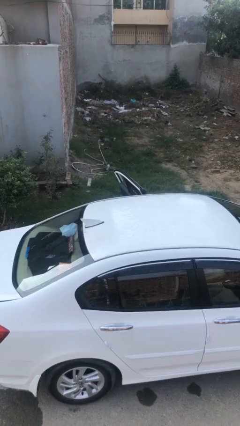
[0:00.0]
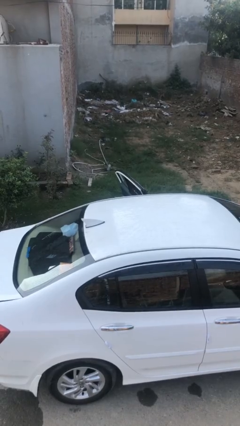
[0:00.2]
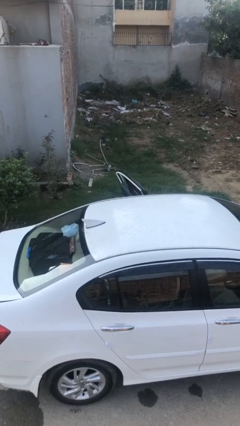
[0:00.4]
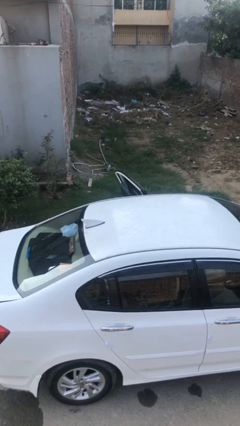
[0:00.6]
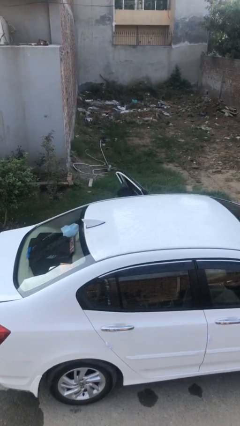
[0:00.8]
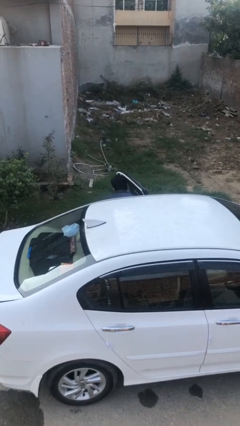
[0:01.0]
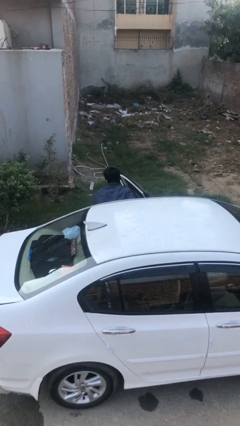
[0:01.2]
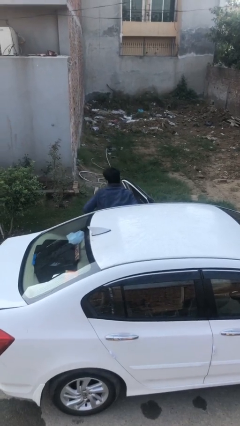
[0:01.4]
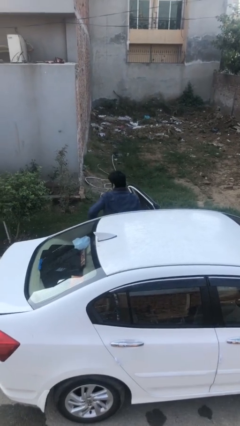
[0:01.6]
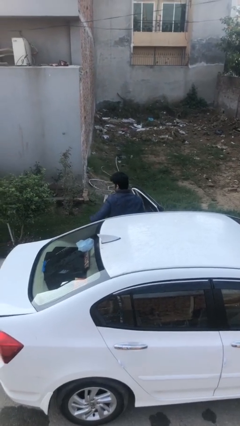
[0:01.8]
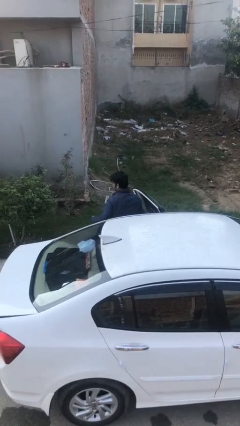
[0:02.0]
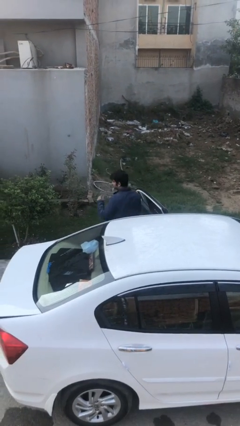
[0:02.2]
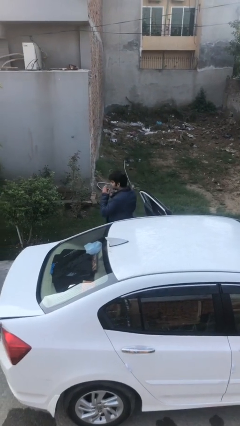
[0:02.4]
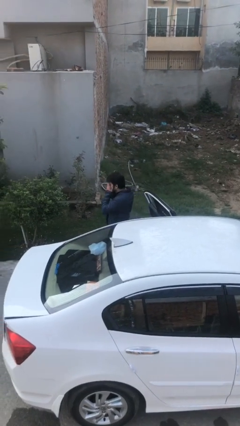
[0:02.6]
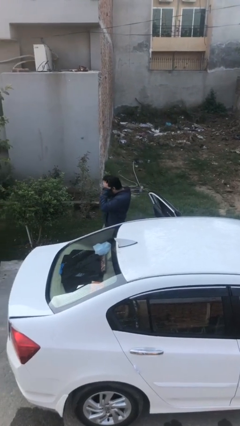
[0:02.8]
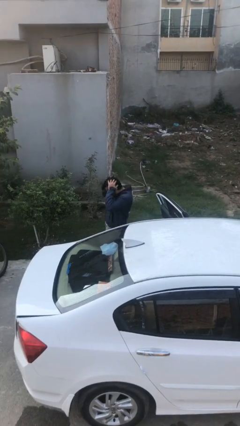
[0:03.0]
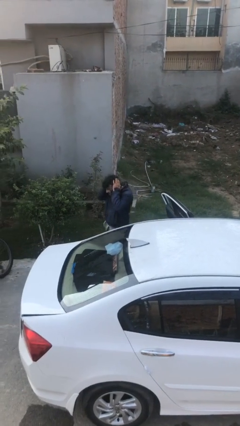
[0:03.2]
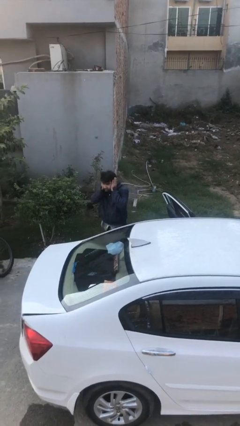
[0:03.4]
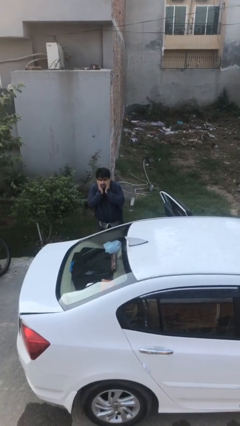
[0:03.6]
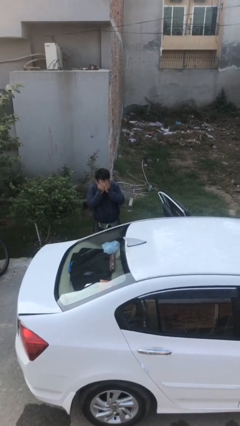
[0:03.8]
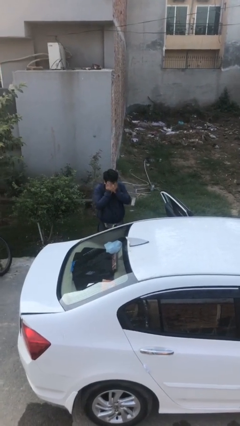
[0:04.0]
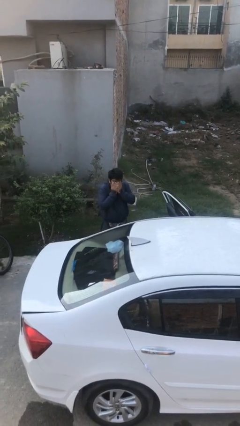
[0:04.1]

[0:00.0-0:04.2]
person exits car

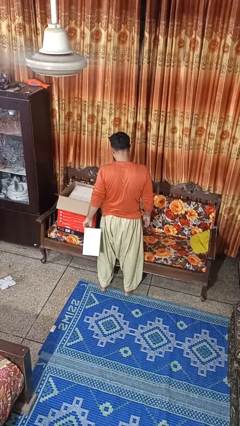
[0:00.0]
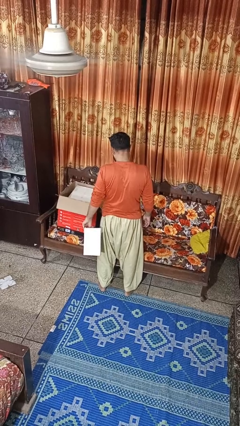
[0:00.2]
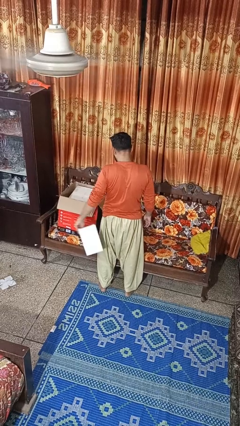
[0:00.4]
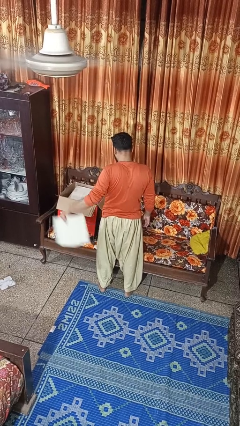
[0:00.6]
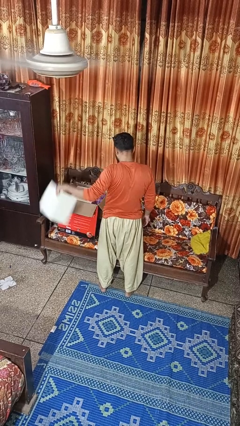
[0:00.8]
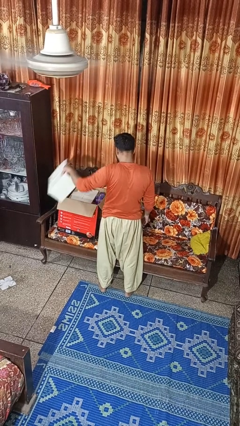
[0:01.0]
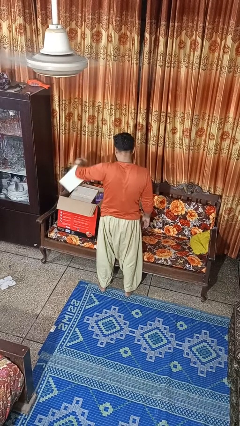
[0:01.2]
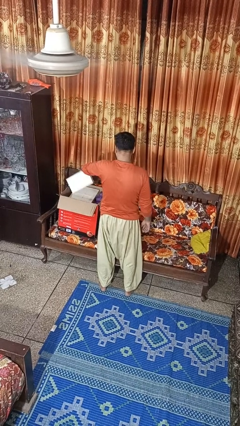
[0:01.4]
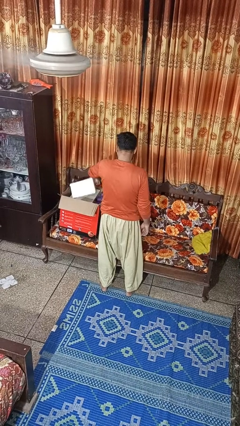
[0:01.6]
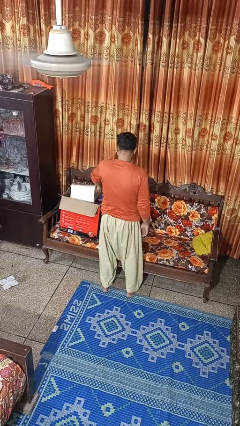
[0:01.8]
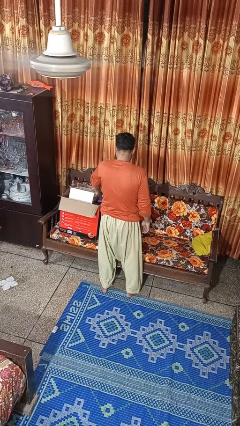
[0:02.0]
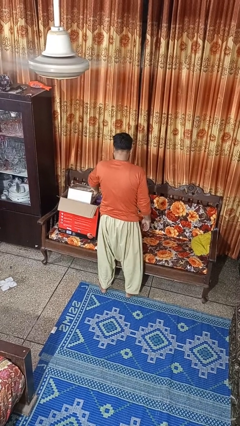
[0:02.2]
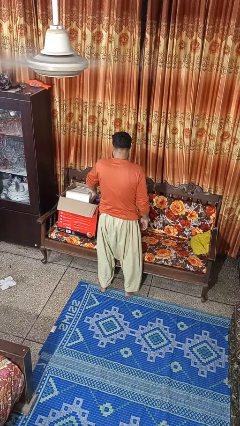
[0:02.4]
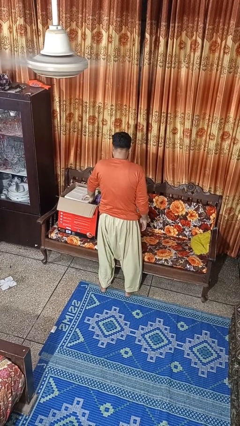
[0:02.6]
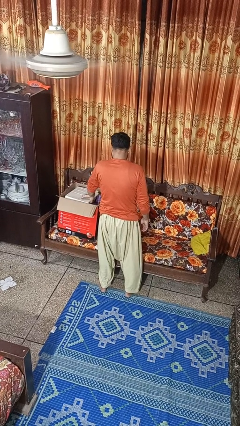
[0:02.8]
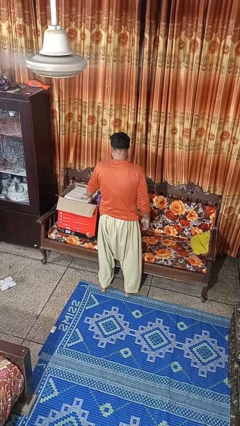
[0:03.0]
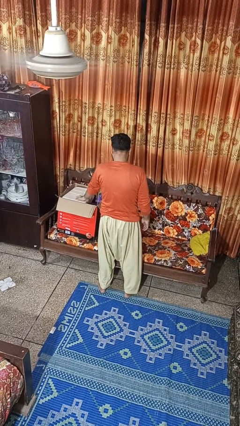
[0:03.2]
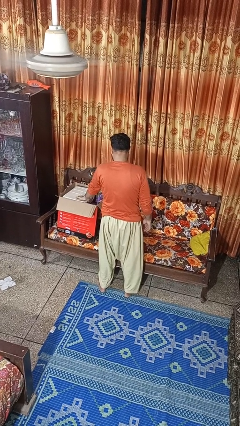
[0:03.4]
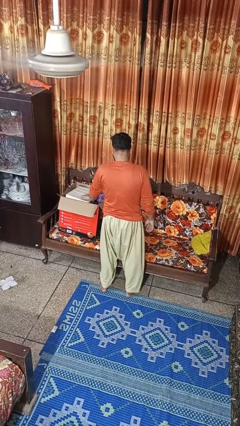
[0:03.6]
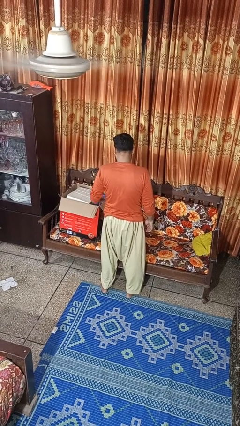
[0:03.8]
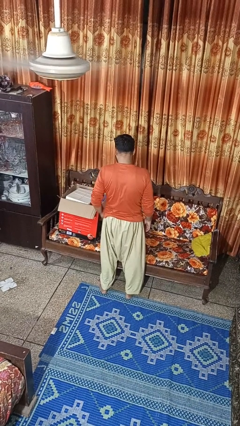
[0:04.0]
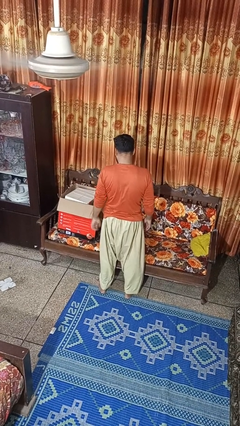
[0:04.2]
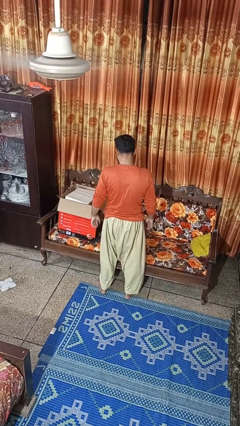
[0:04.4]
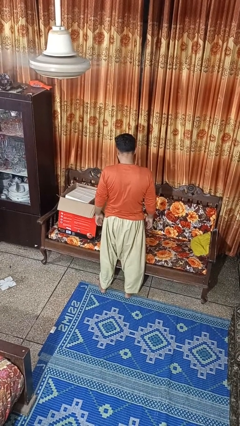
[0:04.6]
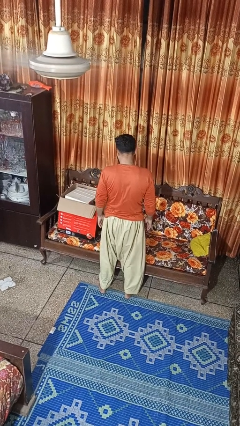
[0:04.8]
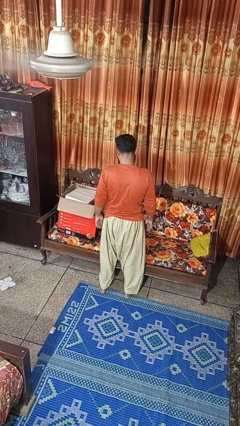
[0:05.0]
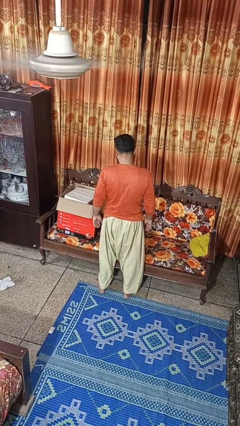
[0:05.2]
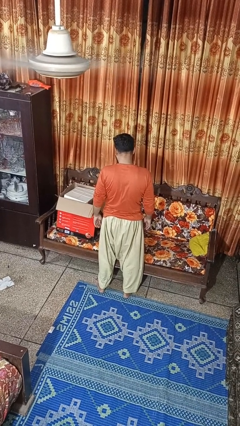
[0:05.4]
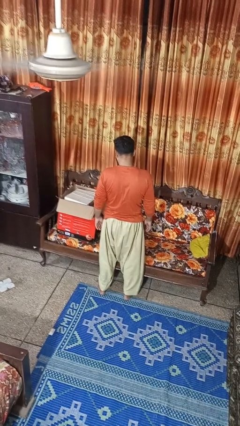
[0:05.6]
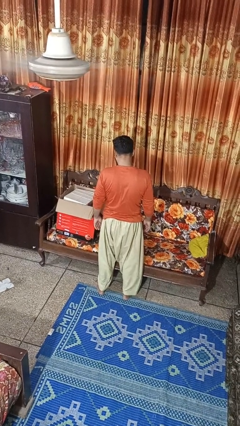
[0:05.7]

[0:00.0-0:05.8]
person puts object into box

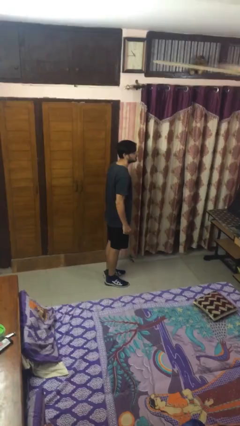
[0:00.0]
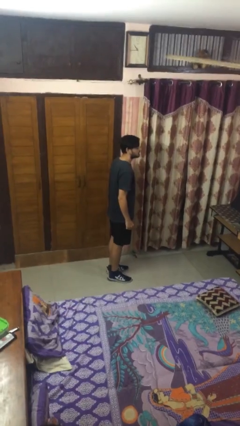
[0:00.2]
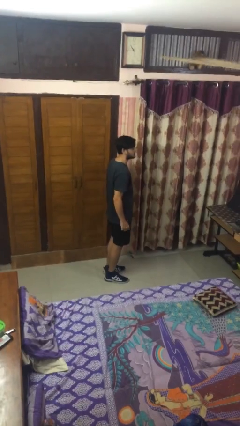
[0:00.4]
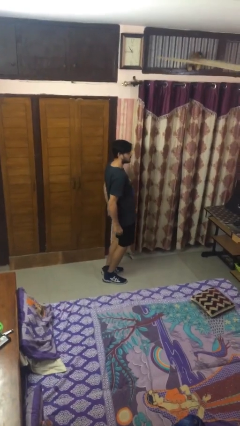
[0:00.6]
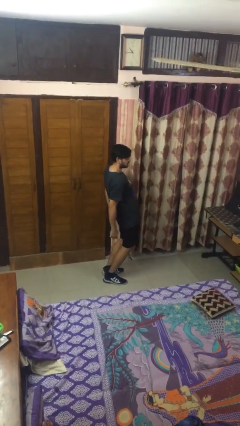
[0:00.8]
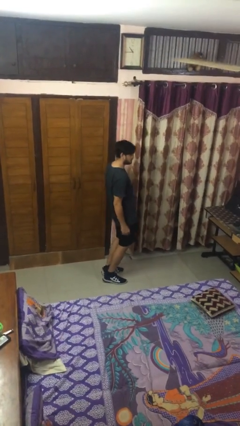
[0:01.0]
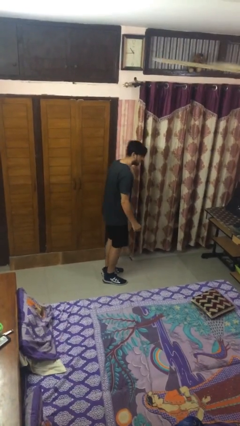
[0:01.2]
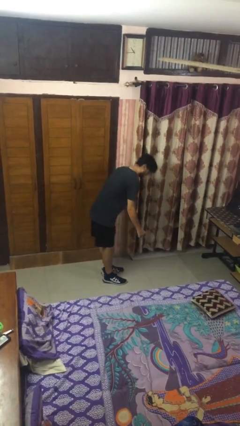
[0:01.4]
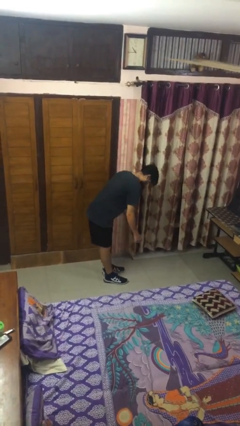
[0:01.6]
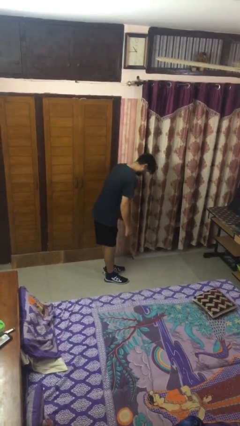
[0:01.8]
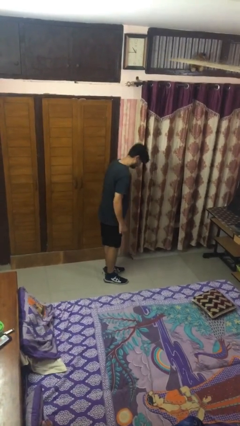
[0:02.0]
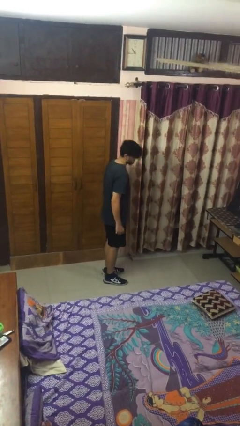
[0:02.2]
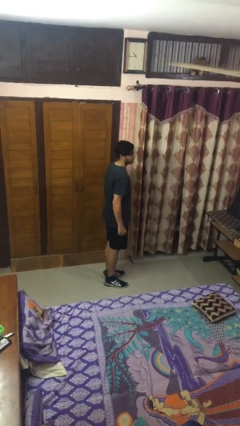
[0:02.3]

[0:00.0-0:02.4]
person wiggles hips

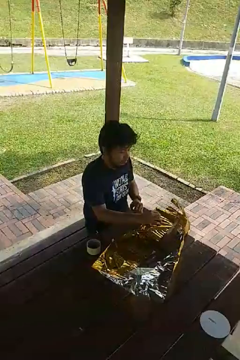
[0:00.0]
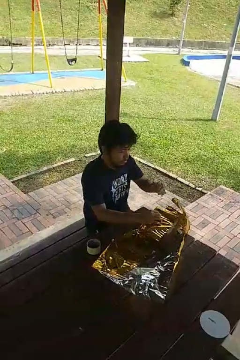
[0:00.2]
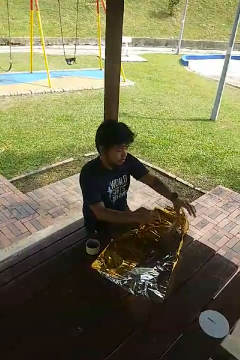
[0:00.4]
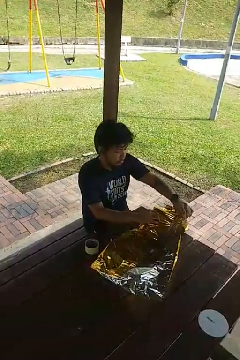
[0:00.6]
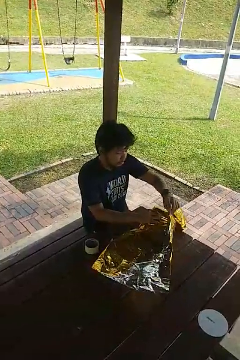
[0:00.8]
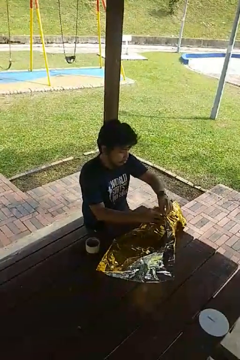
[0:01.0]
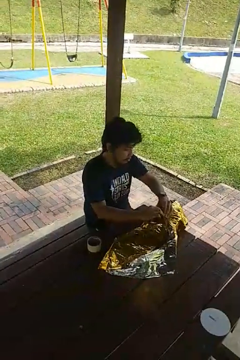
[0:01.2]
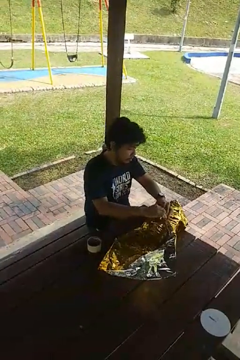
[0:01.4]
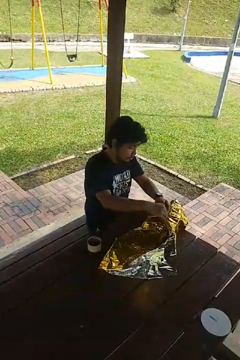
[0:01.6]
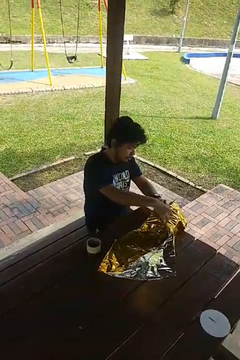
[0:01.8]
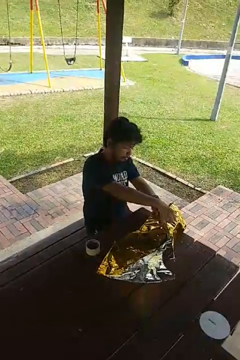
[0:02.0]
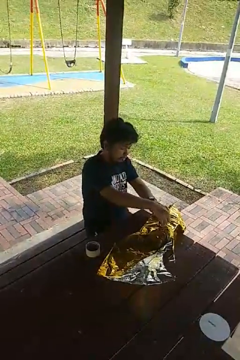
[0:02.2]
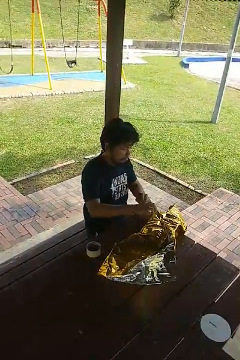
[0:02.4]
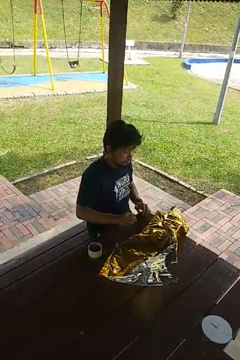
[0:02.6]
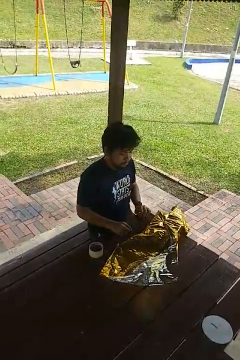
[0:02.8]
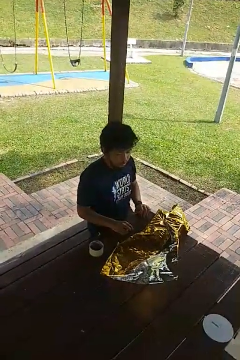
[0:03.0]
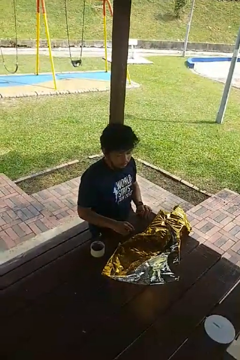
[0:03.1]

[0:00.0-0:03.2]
person wraps box

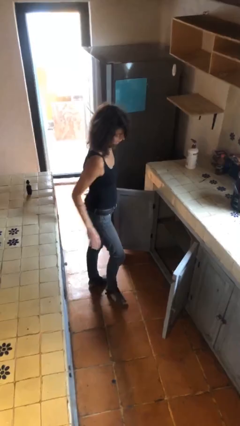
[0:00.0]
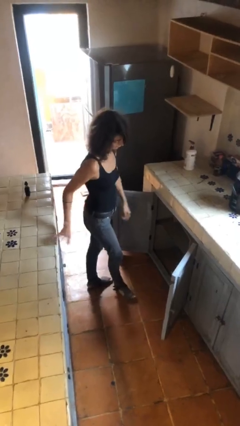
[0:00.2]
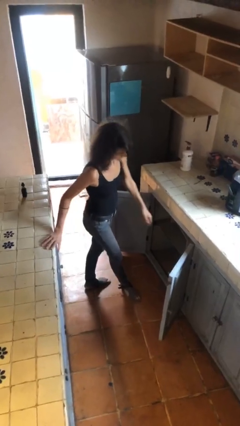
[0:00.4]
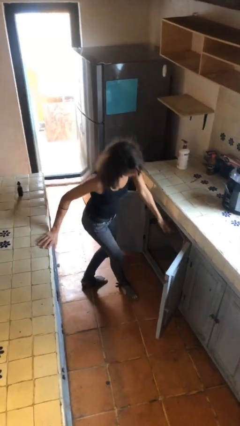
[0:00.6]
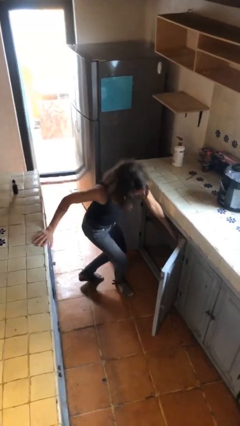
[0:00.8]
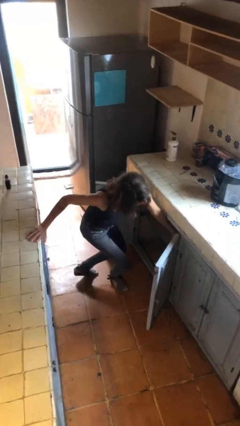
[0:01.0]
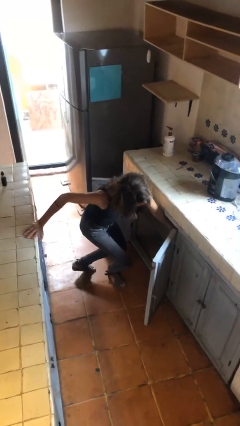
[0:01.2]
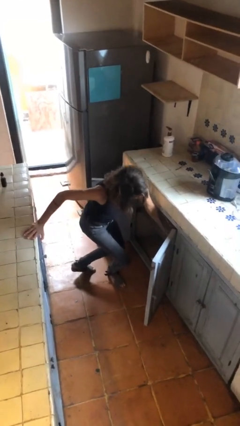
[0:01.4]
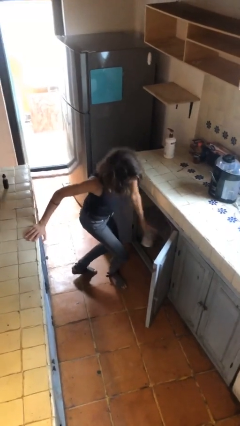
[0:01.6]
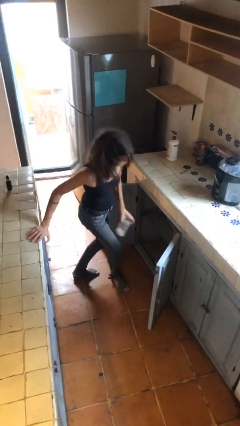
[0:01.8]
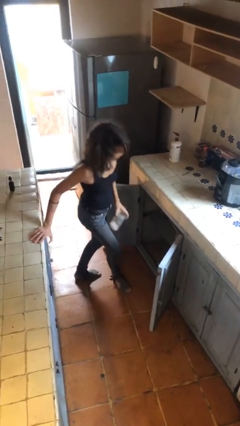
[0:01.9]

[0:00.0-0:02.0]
person picks up object from cabinet

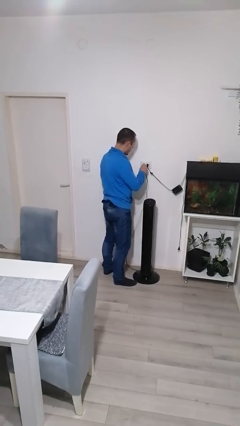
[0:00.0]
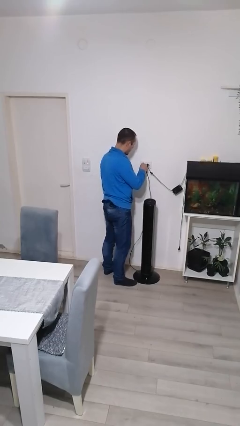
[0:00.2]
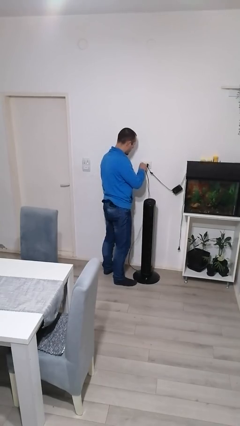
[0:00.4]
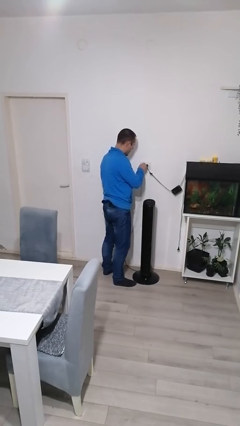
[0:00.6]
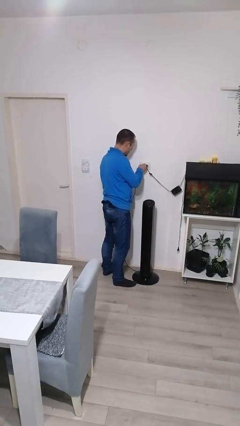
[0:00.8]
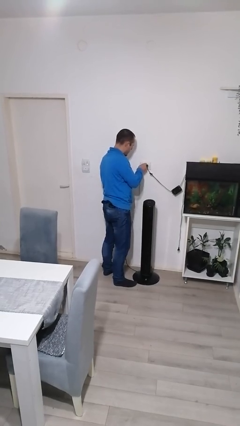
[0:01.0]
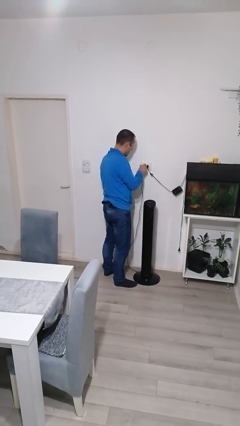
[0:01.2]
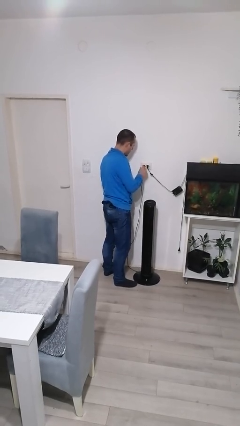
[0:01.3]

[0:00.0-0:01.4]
person plugs into electrical socket
